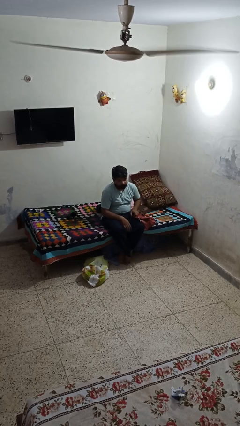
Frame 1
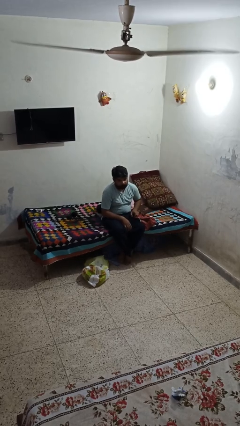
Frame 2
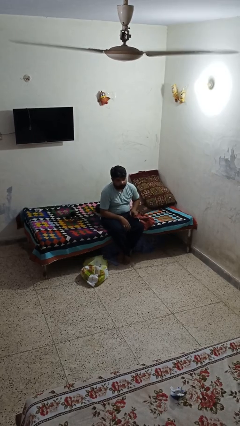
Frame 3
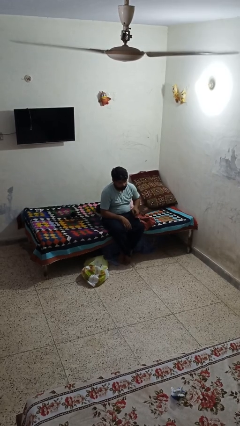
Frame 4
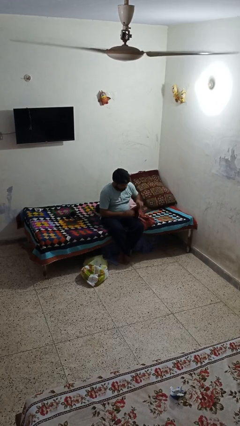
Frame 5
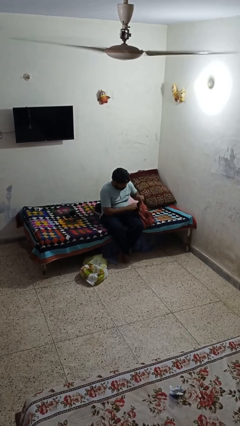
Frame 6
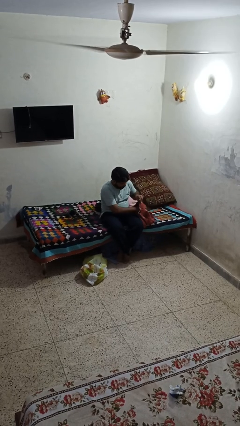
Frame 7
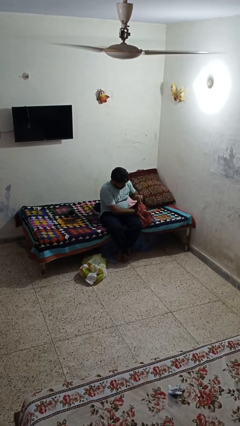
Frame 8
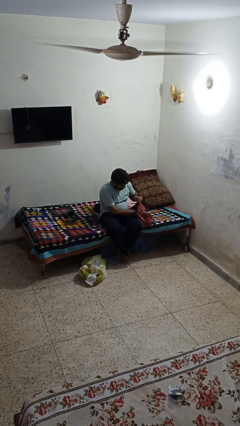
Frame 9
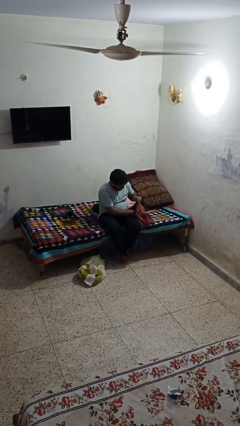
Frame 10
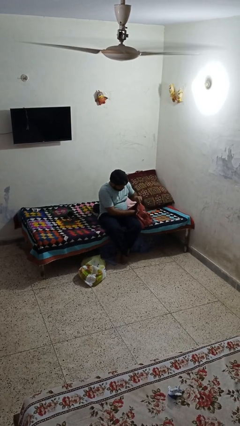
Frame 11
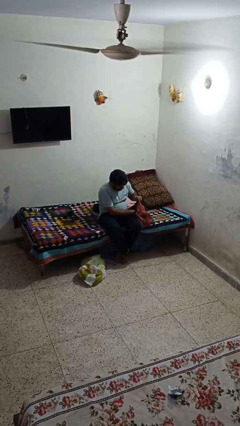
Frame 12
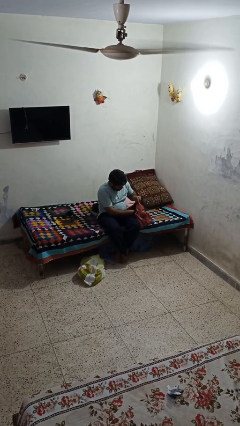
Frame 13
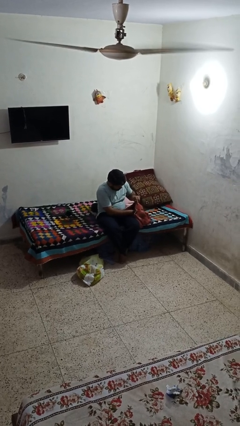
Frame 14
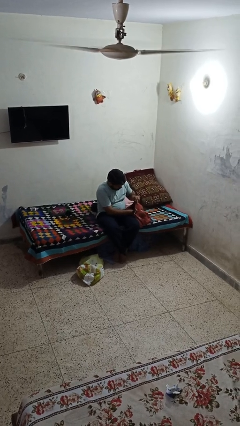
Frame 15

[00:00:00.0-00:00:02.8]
person searches in purse

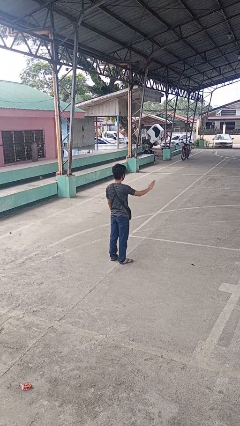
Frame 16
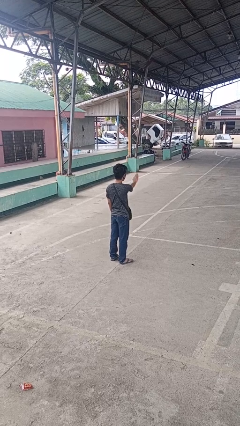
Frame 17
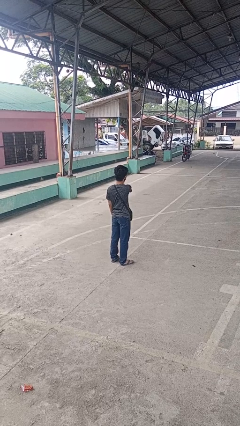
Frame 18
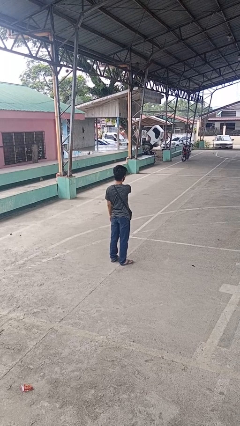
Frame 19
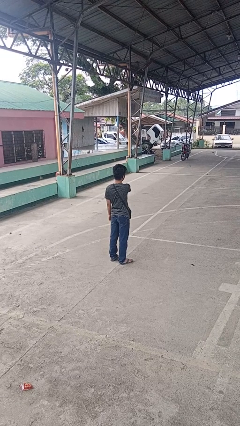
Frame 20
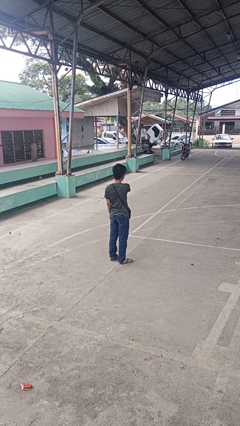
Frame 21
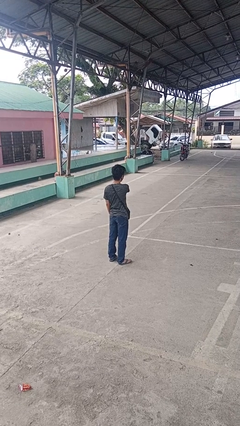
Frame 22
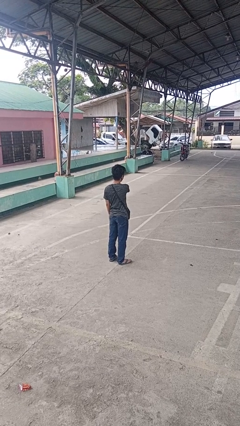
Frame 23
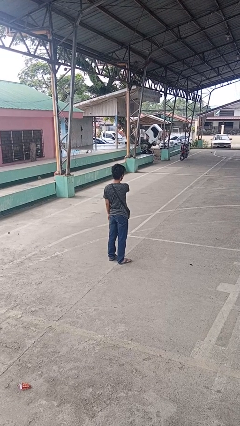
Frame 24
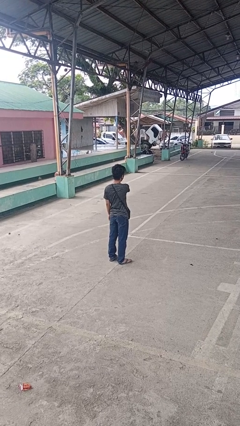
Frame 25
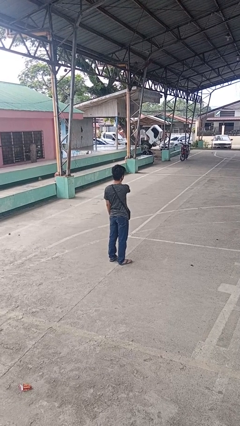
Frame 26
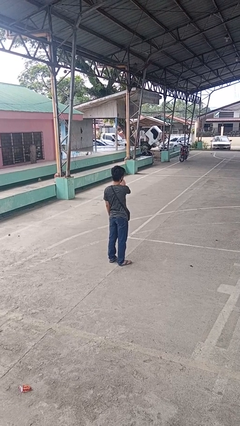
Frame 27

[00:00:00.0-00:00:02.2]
person gestures swipe left

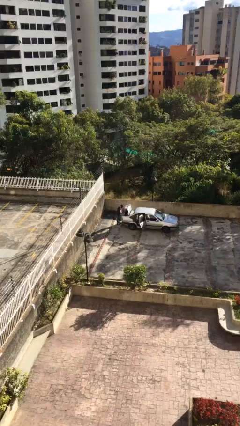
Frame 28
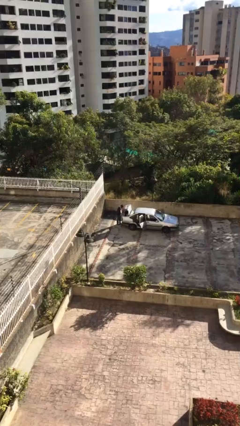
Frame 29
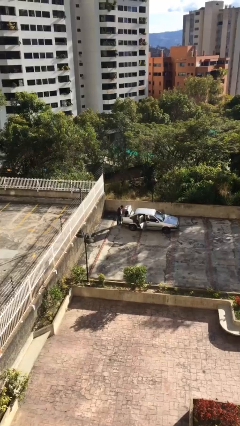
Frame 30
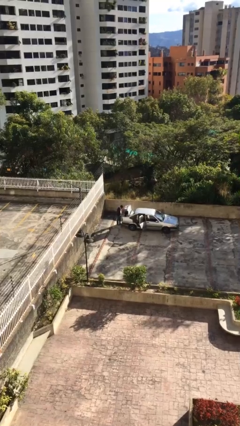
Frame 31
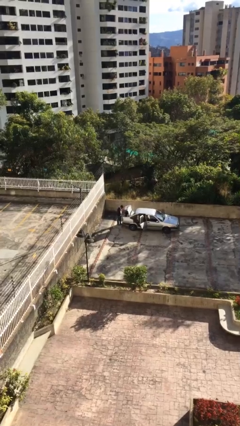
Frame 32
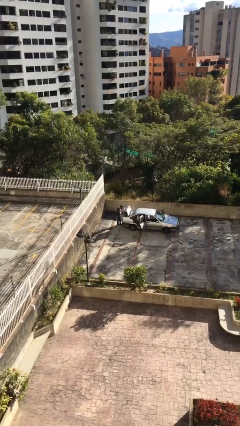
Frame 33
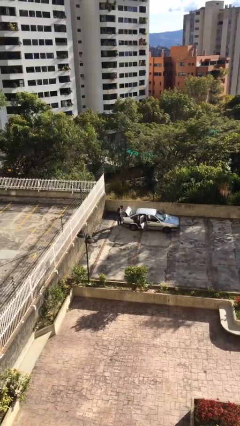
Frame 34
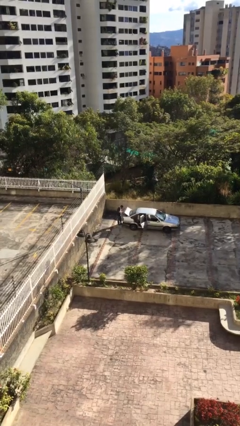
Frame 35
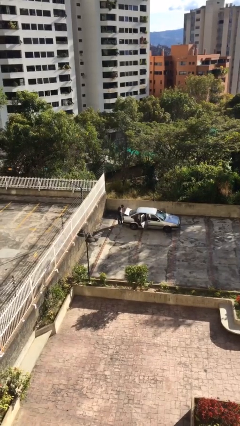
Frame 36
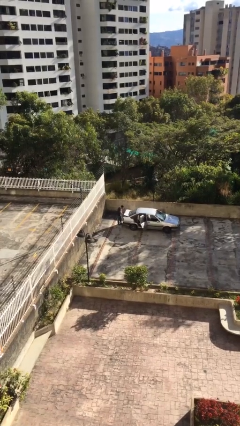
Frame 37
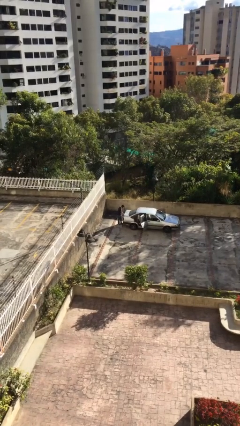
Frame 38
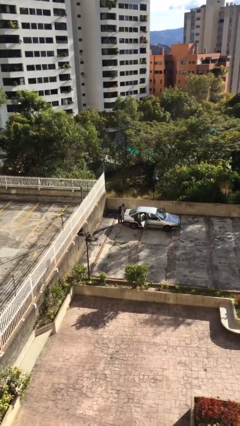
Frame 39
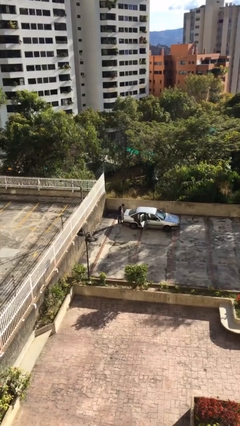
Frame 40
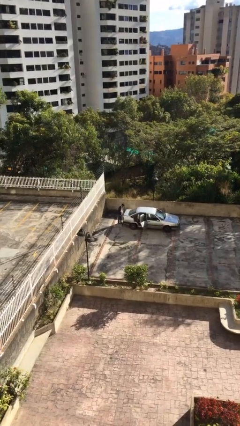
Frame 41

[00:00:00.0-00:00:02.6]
person closes car trunk

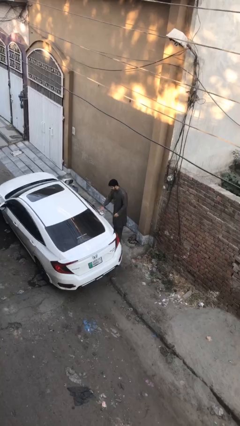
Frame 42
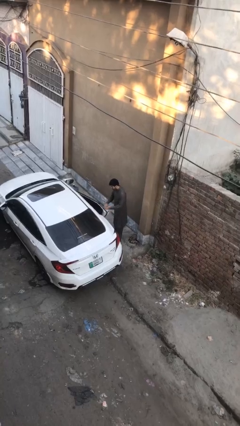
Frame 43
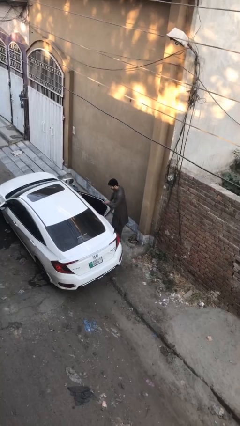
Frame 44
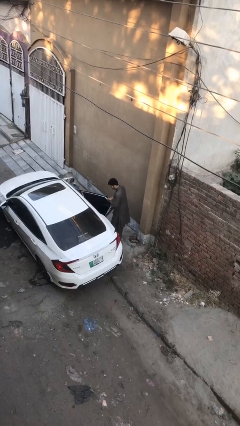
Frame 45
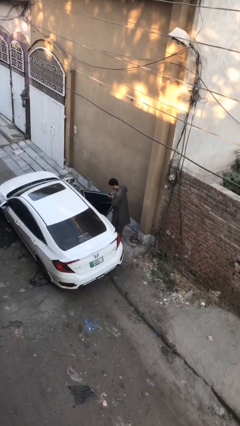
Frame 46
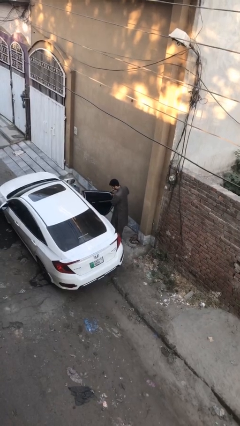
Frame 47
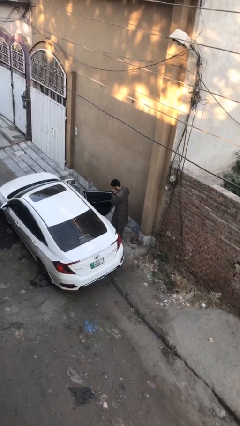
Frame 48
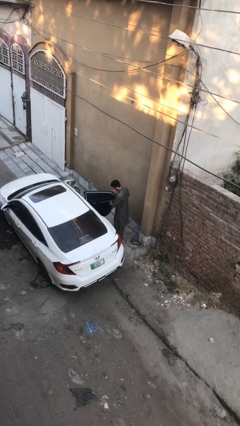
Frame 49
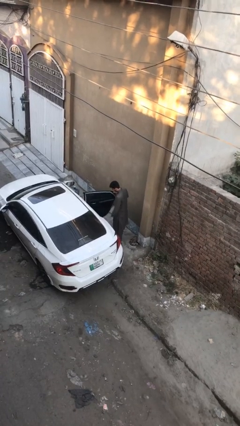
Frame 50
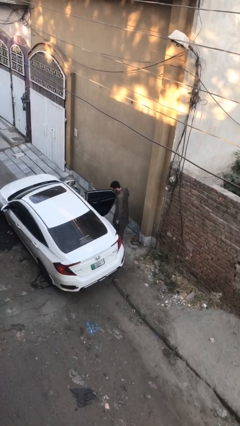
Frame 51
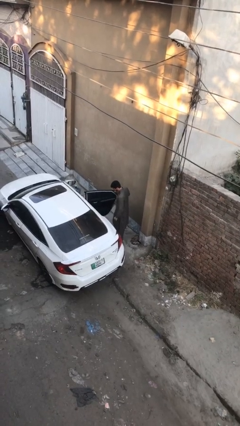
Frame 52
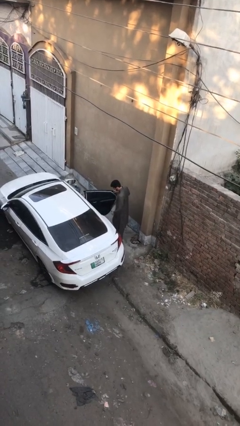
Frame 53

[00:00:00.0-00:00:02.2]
person opens car door

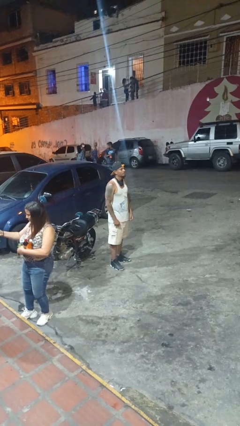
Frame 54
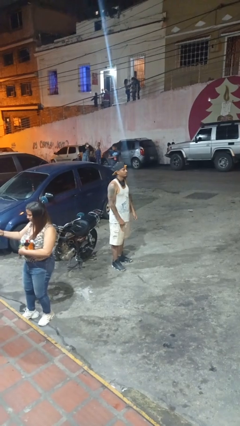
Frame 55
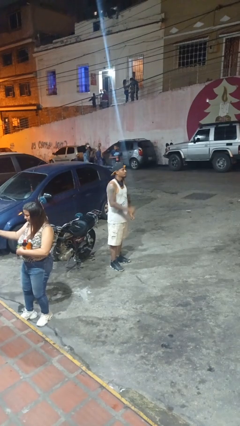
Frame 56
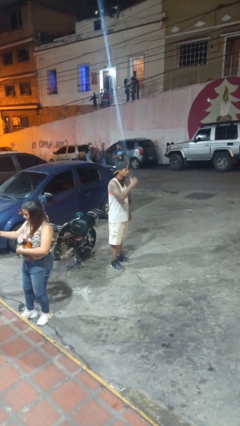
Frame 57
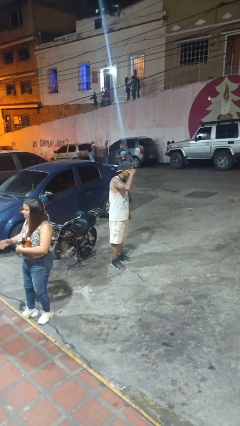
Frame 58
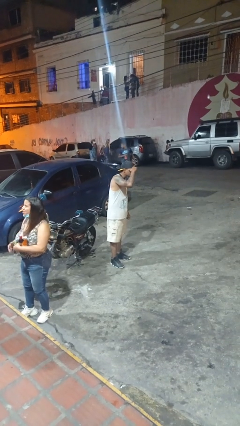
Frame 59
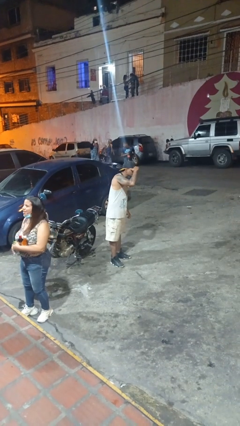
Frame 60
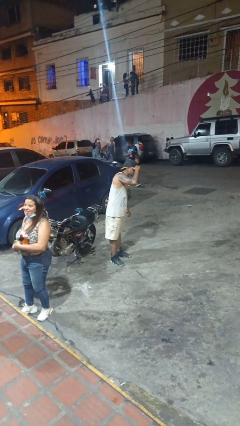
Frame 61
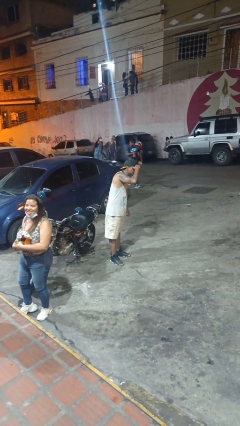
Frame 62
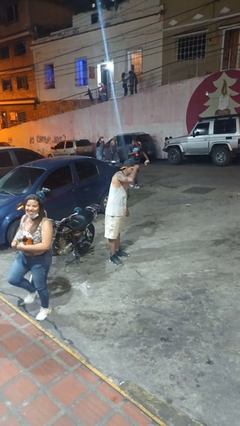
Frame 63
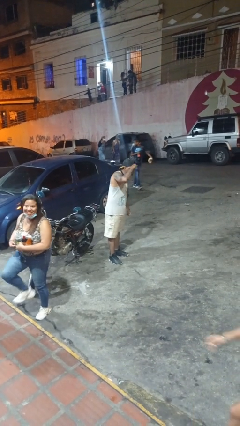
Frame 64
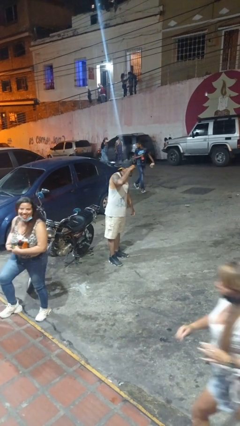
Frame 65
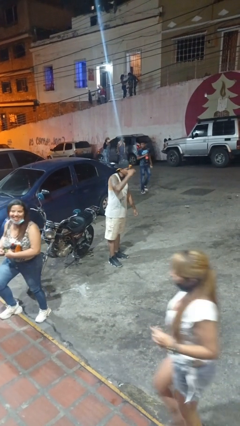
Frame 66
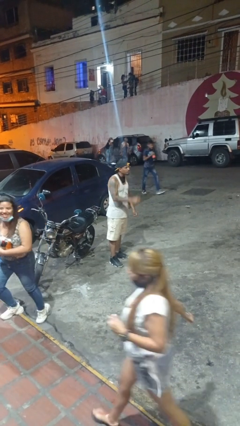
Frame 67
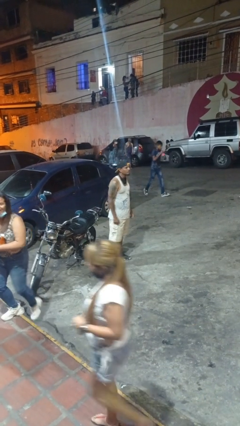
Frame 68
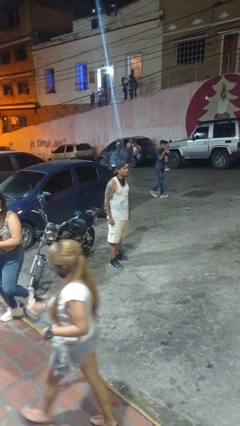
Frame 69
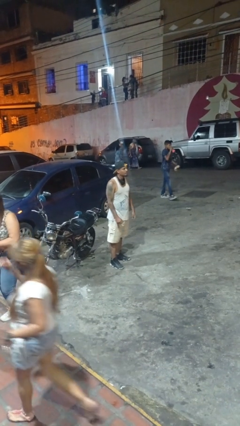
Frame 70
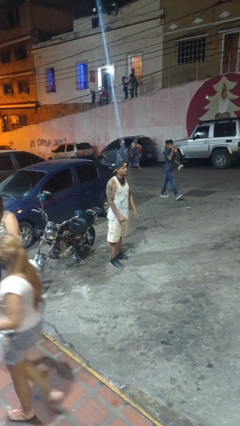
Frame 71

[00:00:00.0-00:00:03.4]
person shades eyes

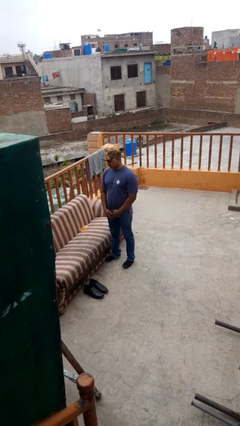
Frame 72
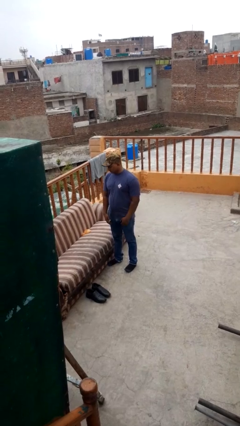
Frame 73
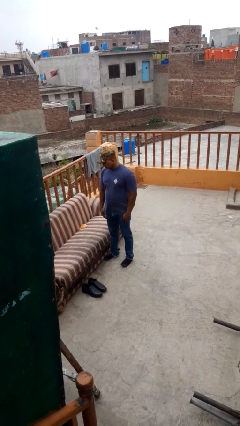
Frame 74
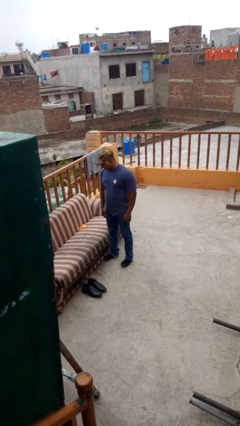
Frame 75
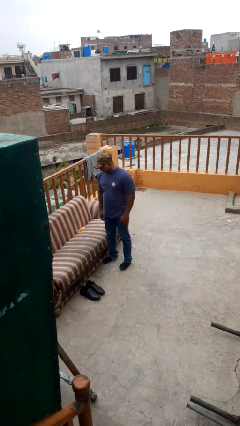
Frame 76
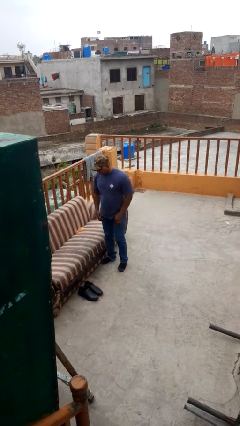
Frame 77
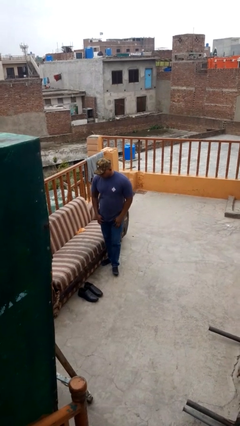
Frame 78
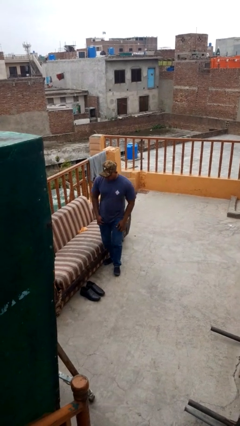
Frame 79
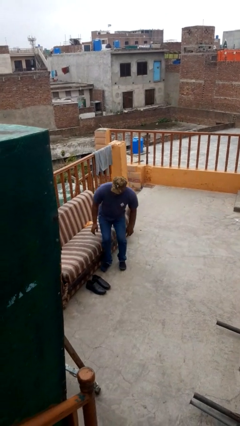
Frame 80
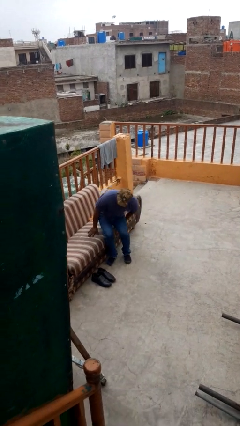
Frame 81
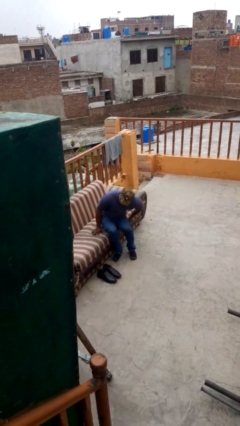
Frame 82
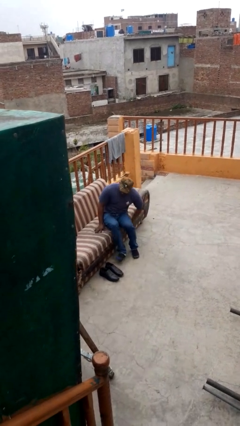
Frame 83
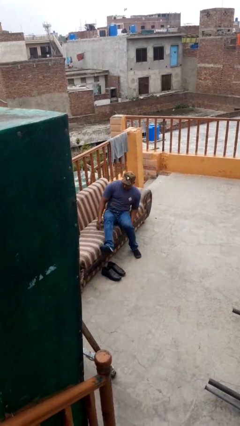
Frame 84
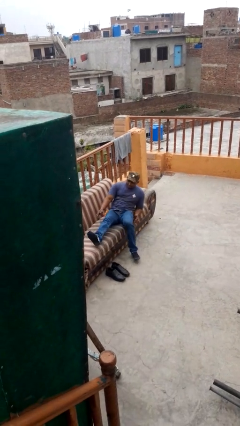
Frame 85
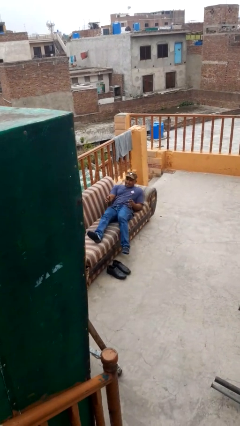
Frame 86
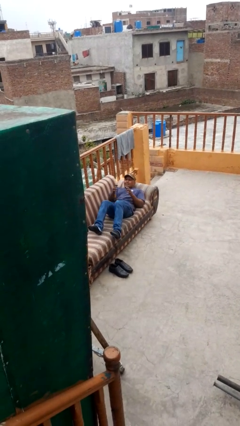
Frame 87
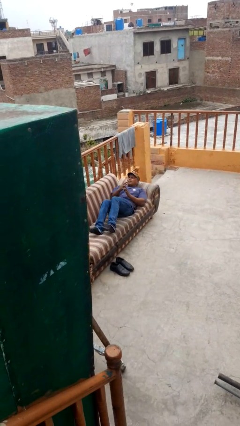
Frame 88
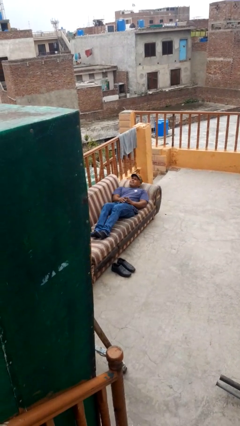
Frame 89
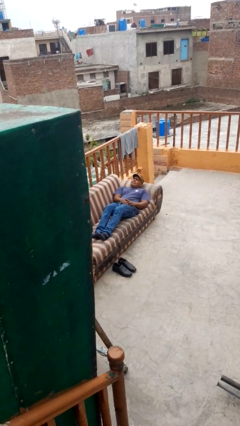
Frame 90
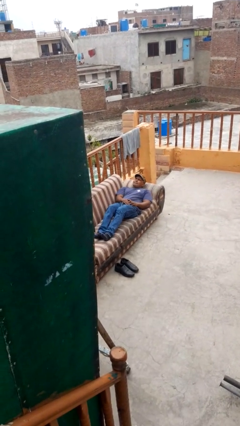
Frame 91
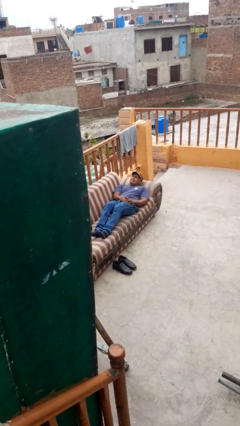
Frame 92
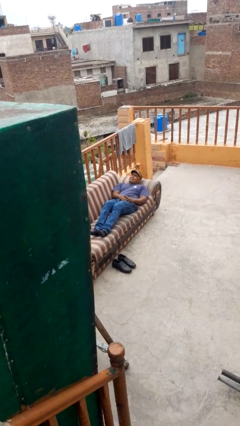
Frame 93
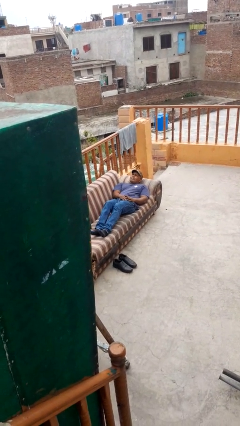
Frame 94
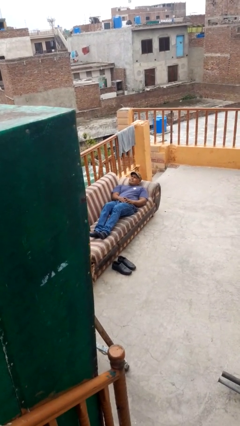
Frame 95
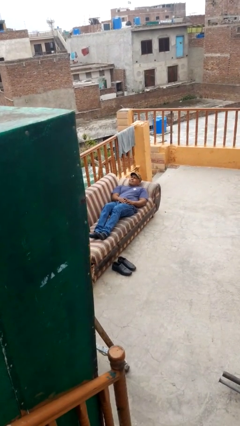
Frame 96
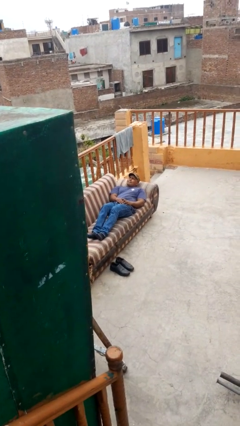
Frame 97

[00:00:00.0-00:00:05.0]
person lies down on couch
